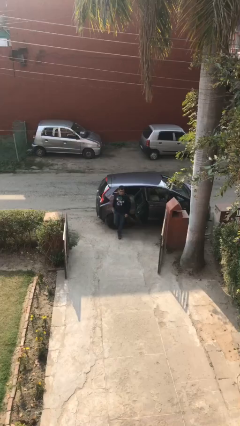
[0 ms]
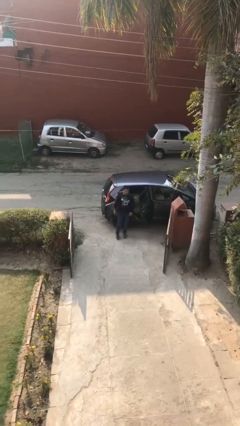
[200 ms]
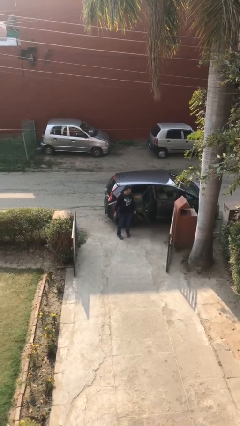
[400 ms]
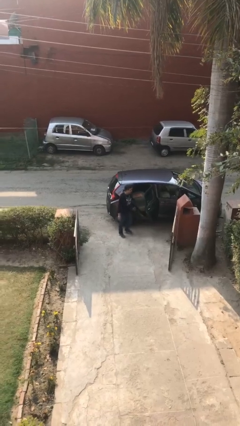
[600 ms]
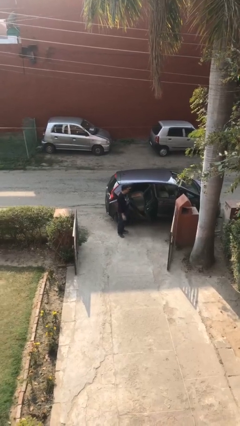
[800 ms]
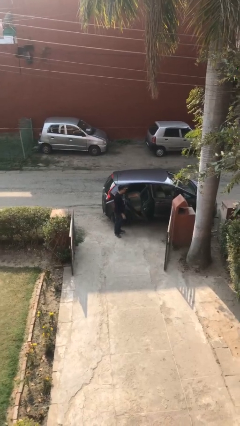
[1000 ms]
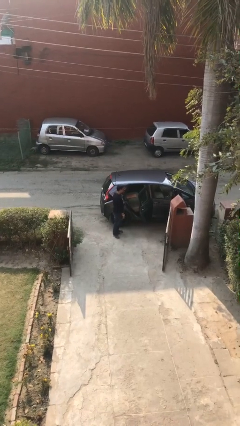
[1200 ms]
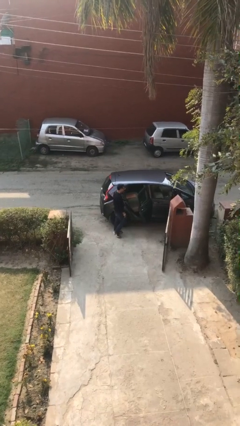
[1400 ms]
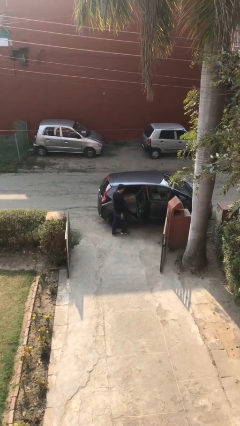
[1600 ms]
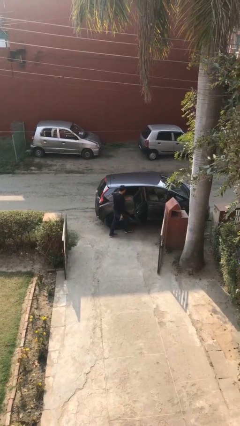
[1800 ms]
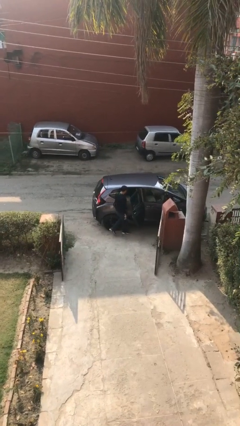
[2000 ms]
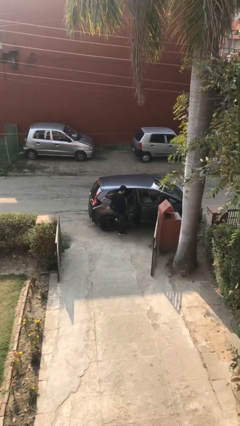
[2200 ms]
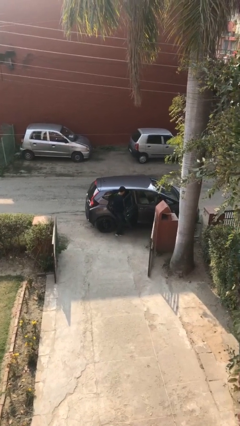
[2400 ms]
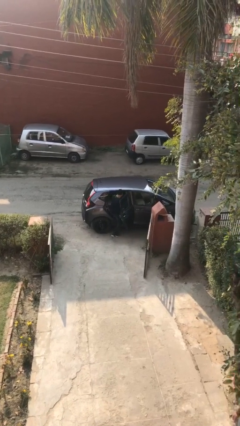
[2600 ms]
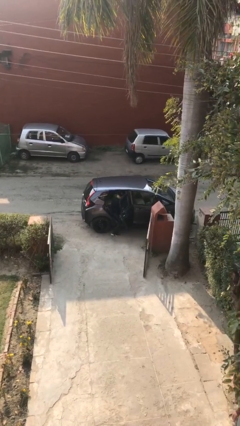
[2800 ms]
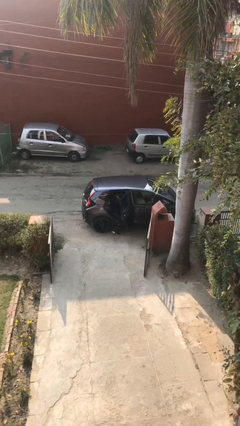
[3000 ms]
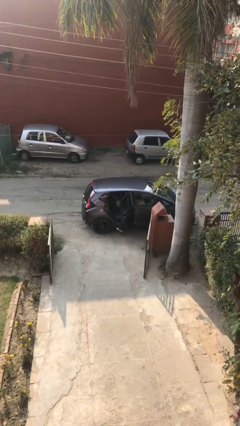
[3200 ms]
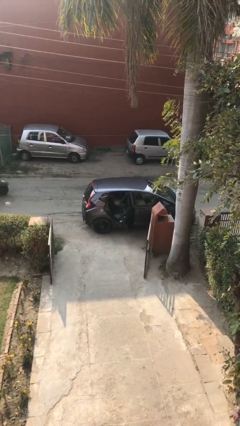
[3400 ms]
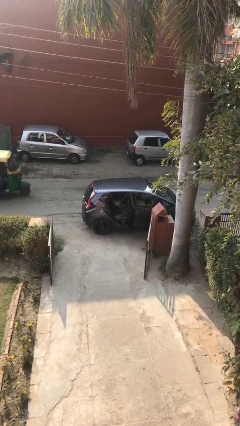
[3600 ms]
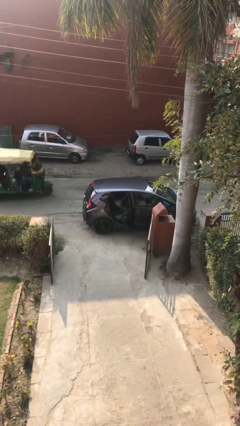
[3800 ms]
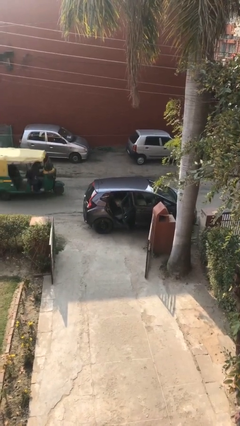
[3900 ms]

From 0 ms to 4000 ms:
person enters car

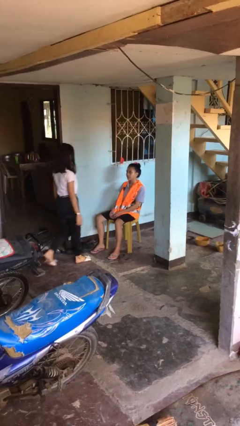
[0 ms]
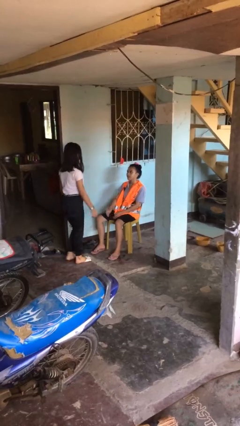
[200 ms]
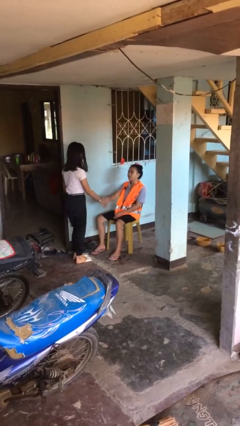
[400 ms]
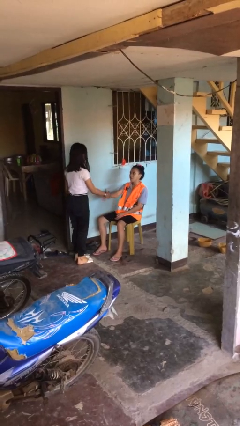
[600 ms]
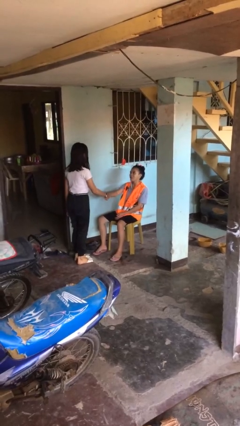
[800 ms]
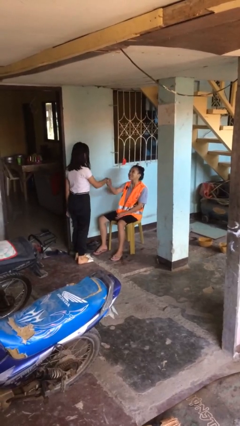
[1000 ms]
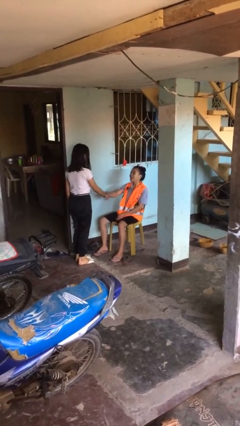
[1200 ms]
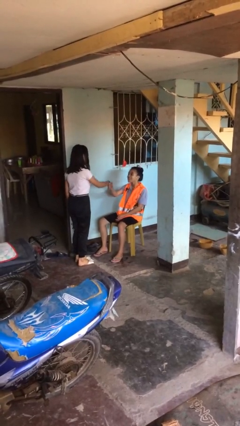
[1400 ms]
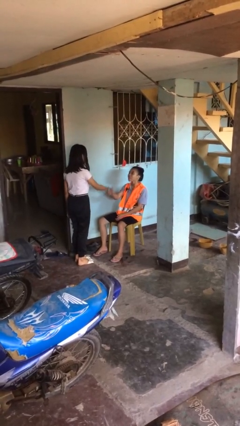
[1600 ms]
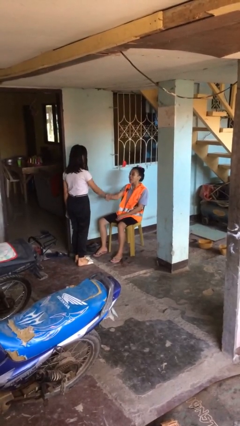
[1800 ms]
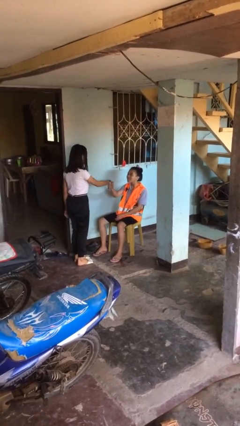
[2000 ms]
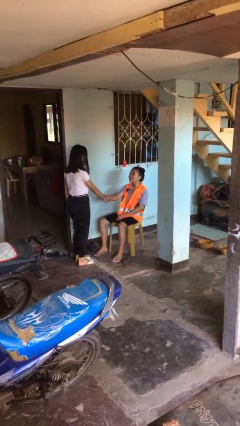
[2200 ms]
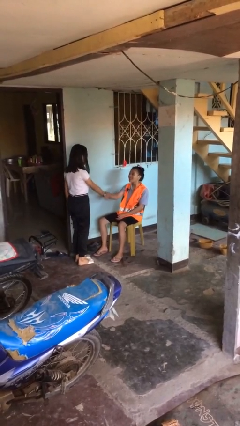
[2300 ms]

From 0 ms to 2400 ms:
person shakes hand

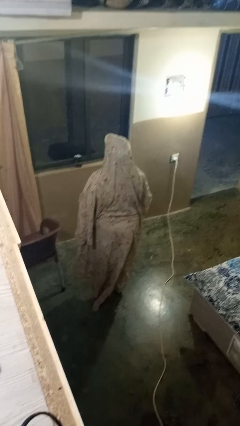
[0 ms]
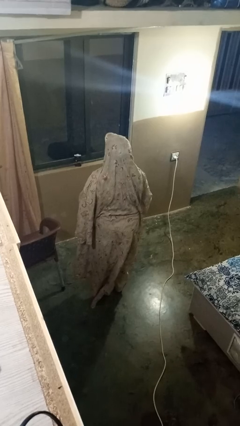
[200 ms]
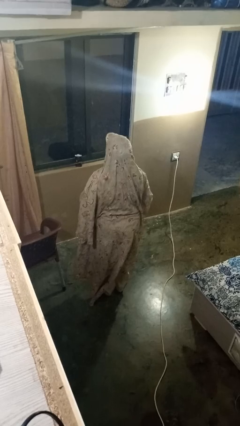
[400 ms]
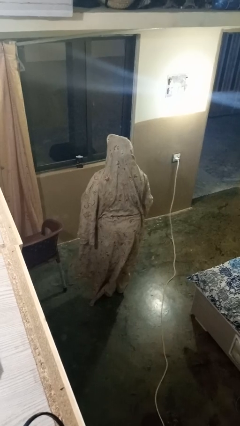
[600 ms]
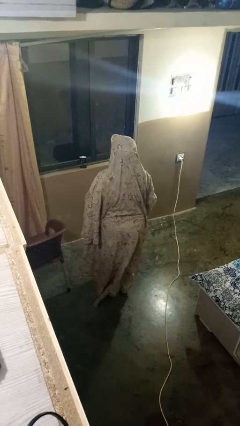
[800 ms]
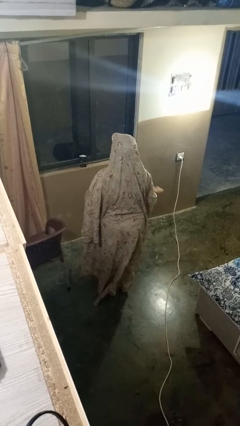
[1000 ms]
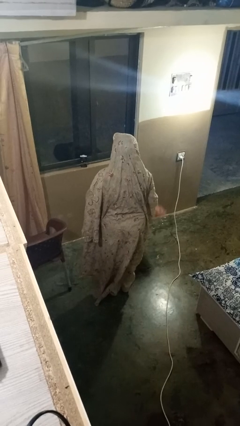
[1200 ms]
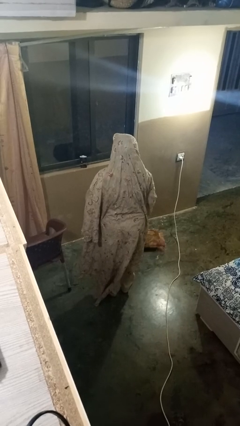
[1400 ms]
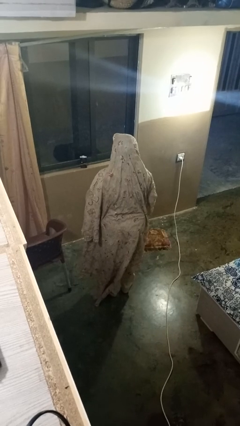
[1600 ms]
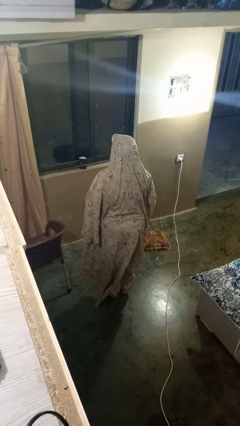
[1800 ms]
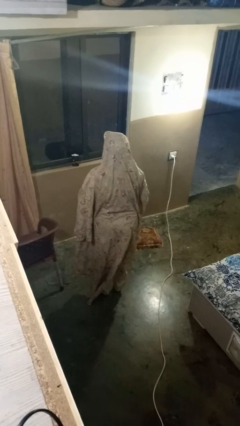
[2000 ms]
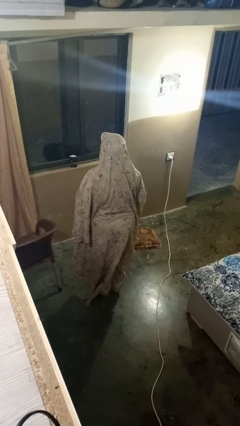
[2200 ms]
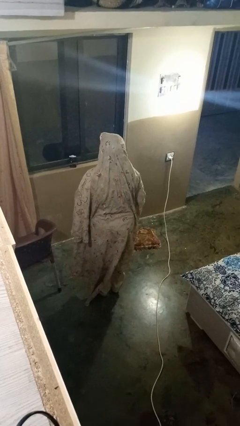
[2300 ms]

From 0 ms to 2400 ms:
person drops object

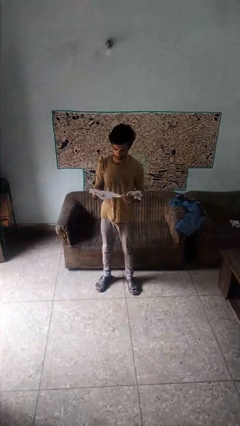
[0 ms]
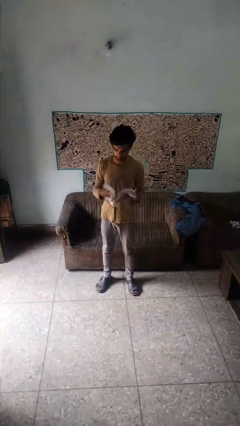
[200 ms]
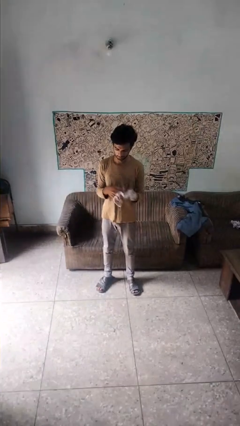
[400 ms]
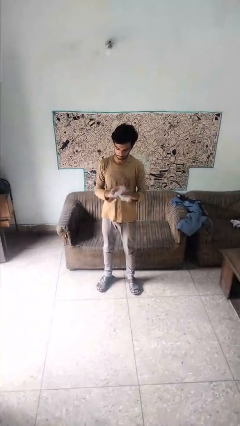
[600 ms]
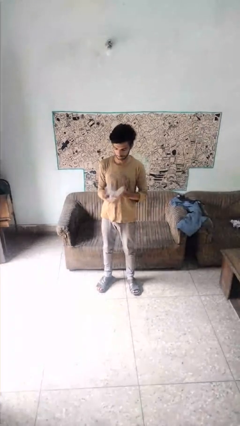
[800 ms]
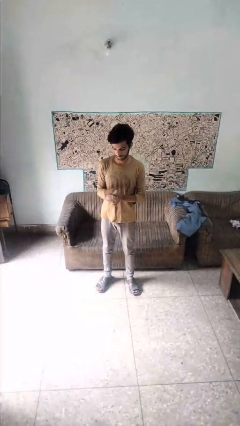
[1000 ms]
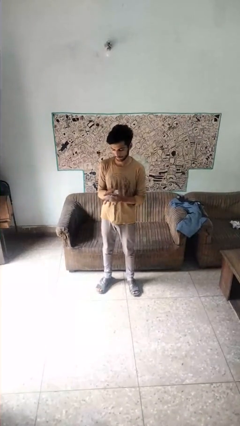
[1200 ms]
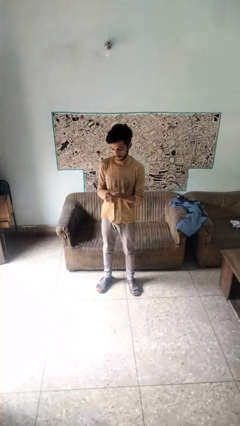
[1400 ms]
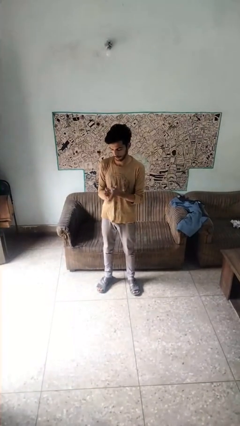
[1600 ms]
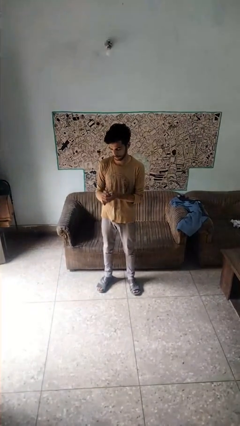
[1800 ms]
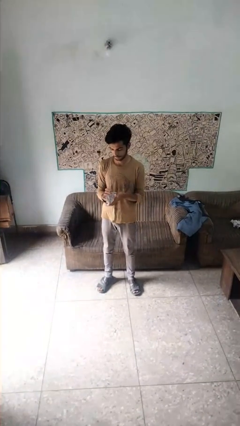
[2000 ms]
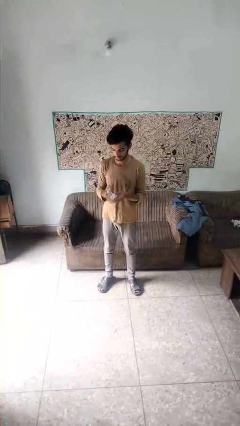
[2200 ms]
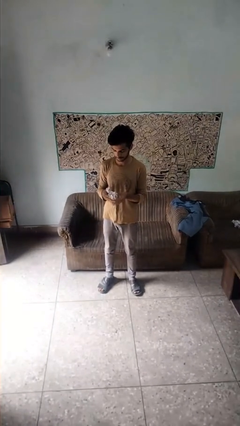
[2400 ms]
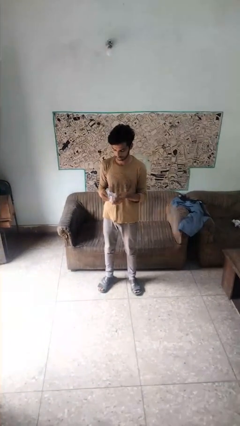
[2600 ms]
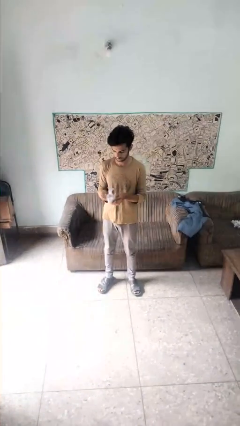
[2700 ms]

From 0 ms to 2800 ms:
person crumples paper

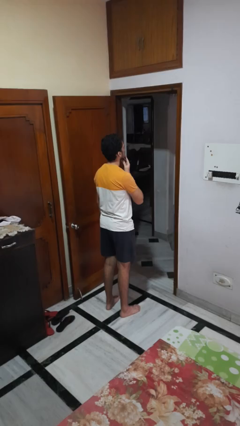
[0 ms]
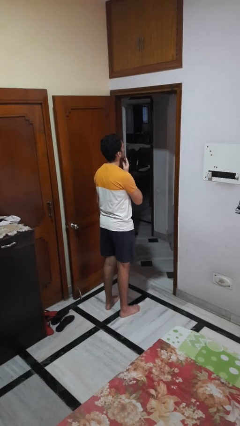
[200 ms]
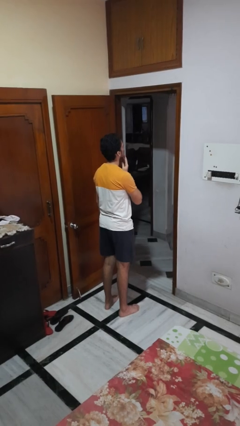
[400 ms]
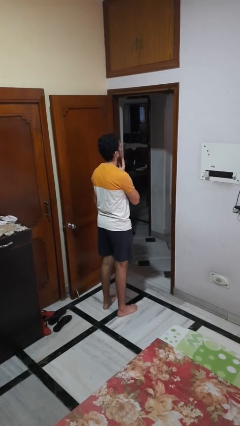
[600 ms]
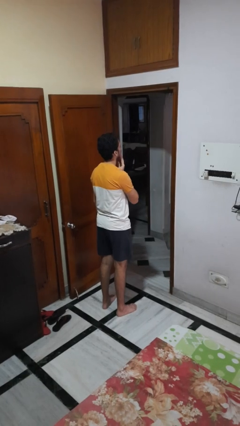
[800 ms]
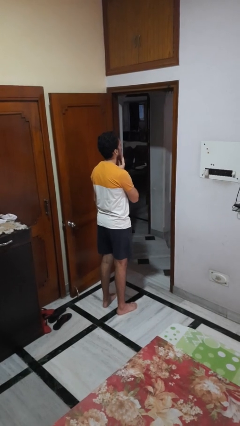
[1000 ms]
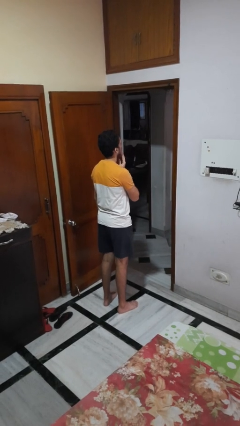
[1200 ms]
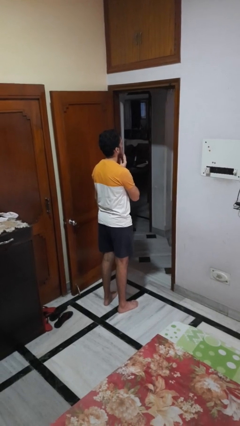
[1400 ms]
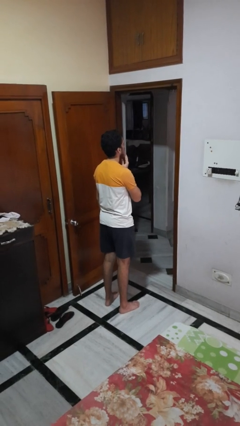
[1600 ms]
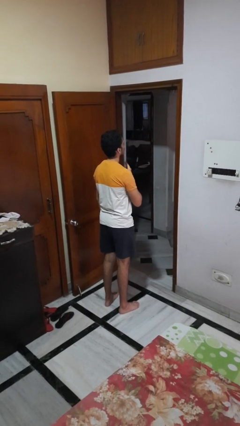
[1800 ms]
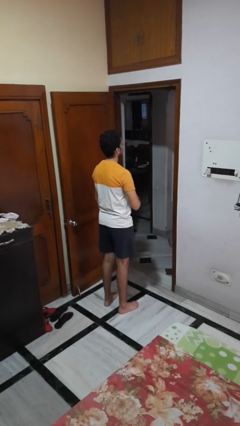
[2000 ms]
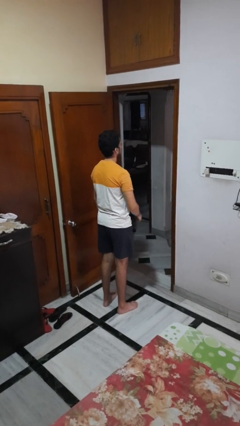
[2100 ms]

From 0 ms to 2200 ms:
person strokes chin

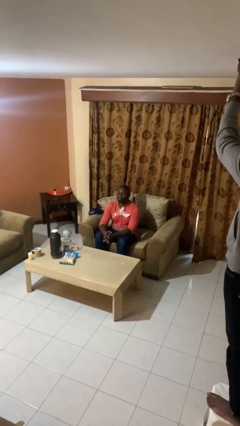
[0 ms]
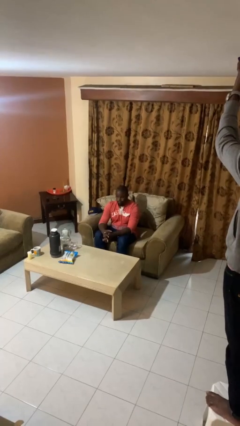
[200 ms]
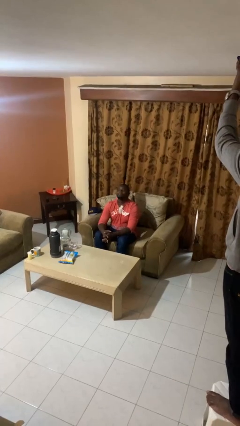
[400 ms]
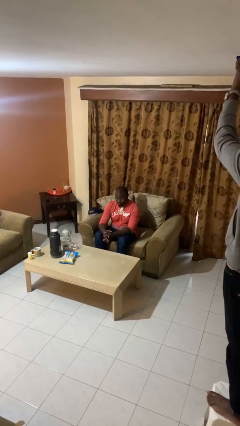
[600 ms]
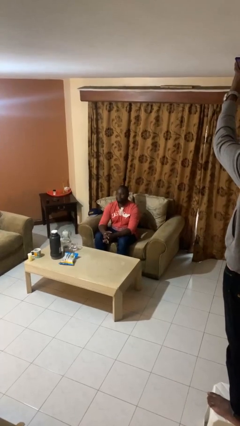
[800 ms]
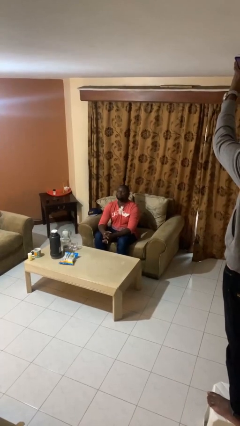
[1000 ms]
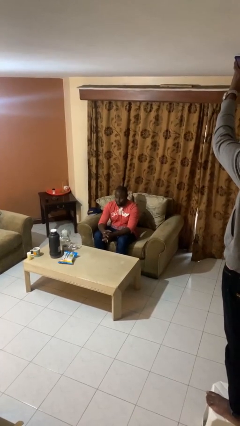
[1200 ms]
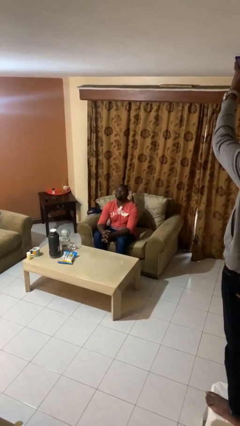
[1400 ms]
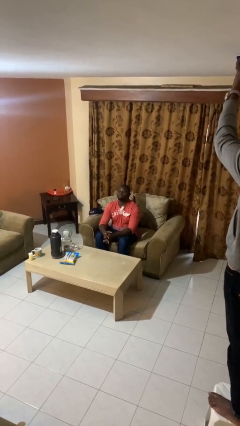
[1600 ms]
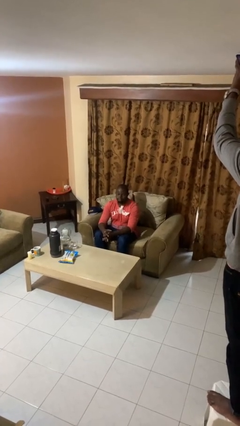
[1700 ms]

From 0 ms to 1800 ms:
person nods head

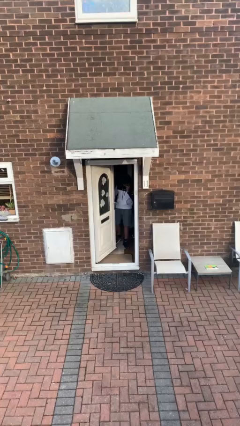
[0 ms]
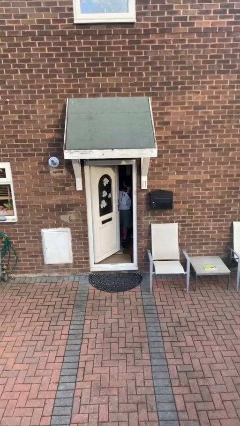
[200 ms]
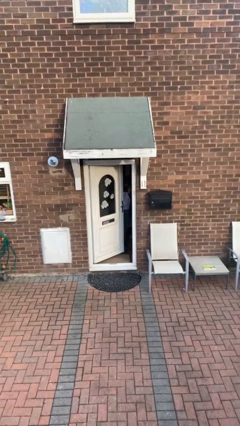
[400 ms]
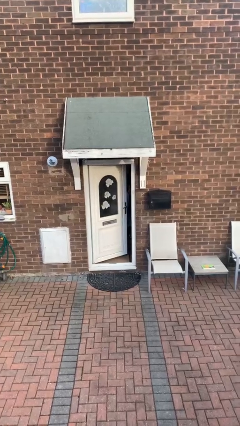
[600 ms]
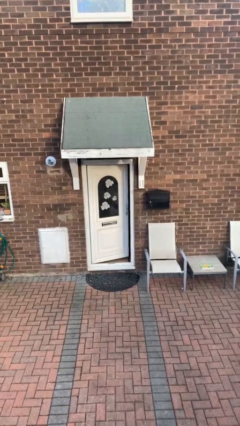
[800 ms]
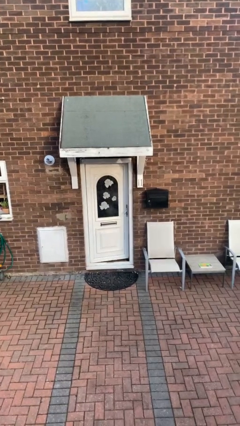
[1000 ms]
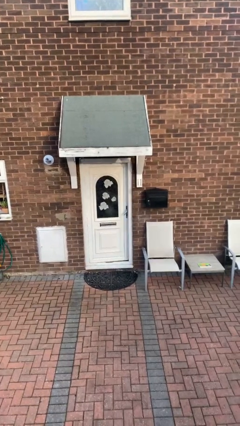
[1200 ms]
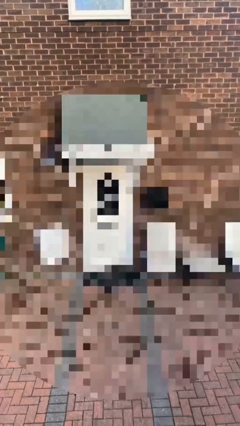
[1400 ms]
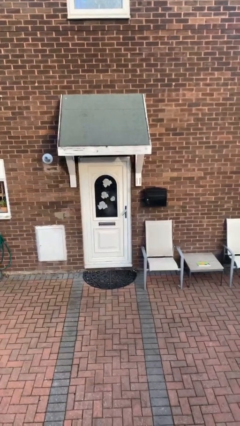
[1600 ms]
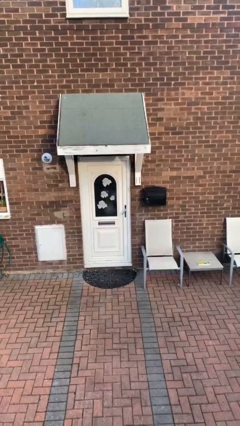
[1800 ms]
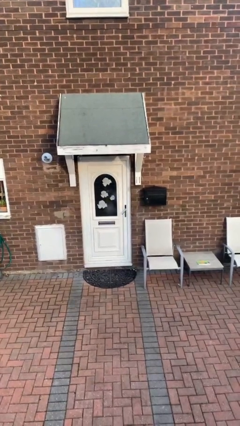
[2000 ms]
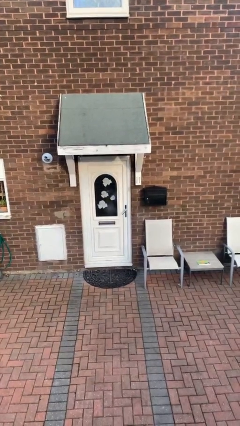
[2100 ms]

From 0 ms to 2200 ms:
person closes facility door
